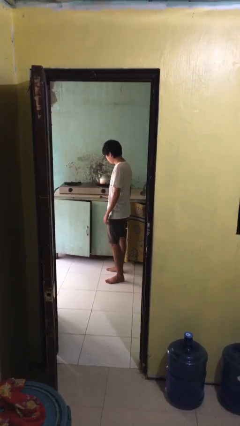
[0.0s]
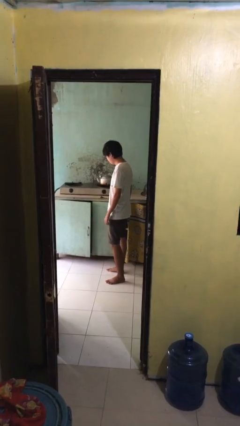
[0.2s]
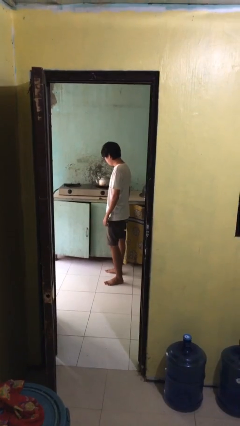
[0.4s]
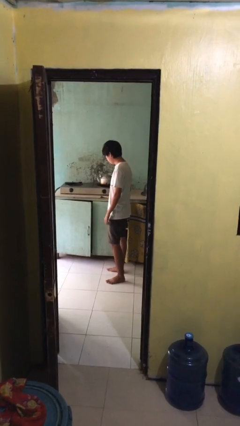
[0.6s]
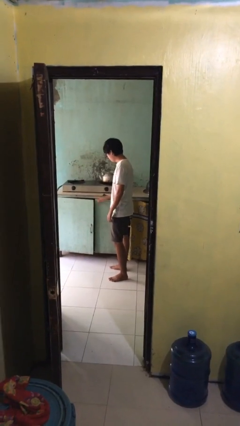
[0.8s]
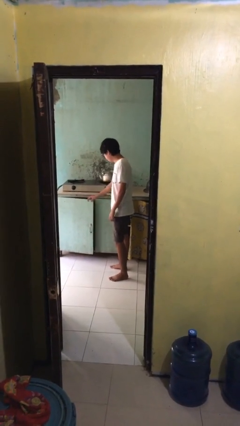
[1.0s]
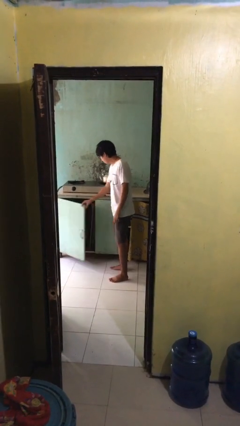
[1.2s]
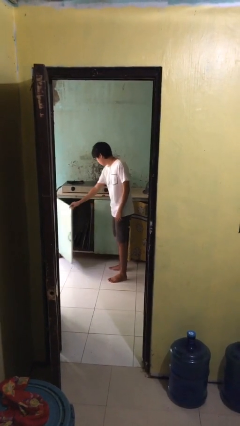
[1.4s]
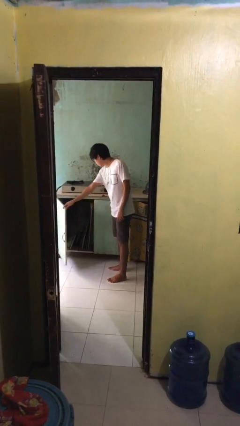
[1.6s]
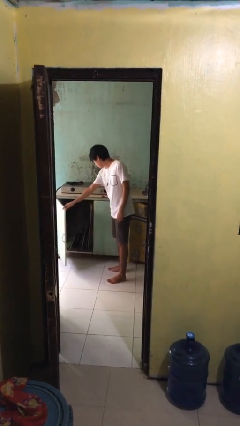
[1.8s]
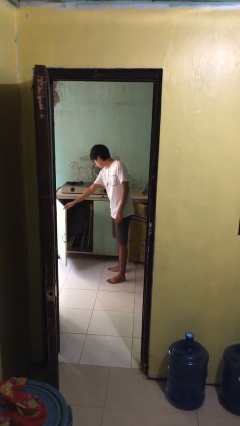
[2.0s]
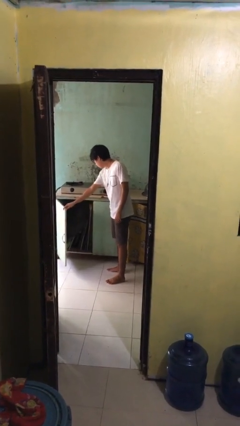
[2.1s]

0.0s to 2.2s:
person opens cabinet

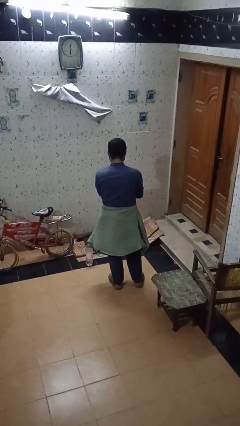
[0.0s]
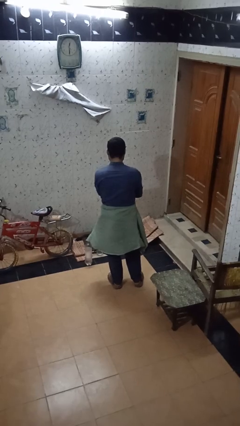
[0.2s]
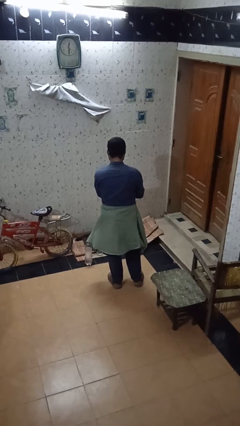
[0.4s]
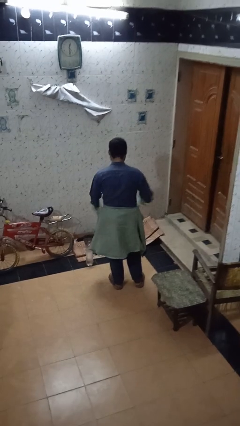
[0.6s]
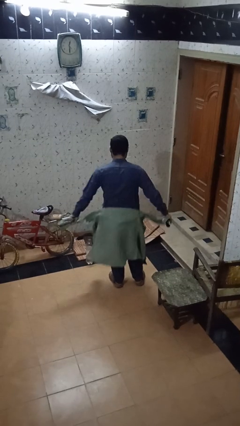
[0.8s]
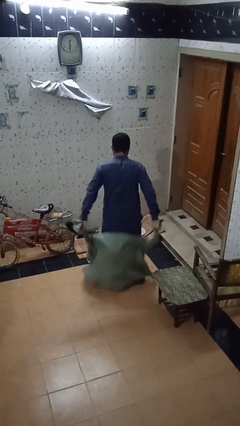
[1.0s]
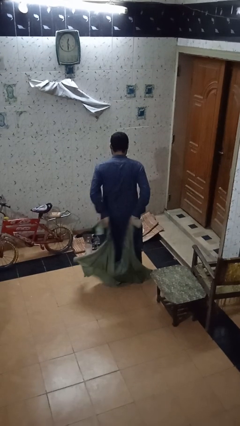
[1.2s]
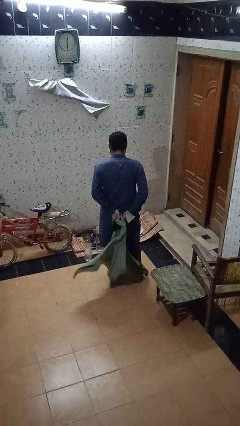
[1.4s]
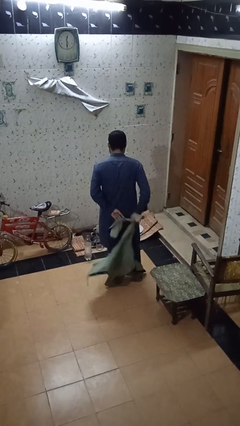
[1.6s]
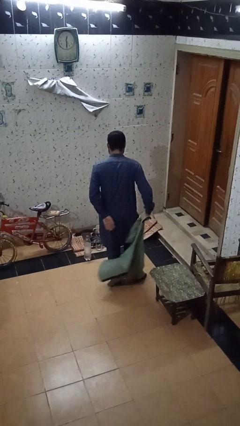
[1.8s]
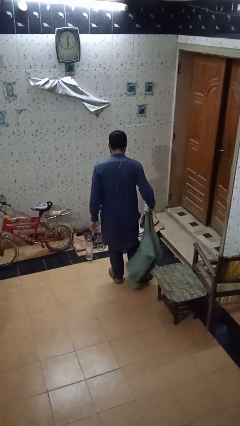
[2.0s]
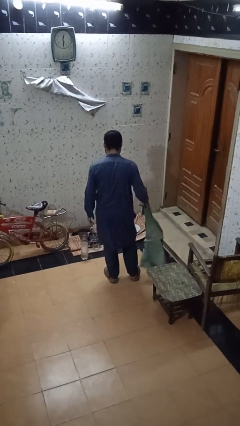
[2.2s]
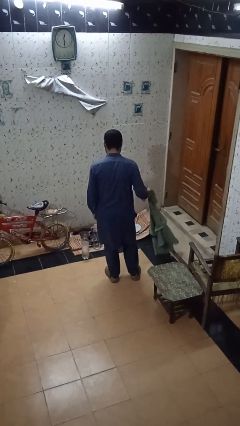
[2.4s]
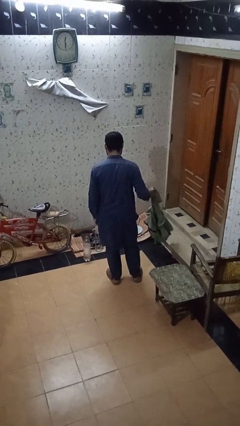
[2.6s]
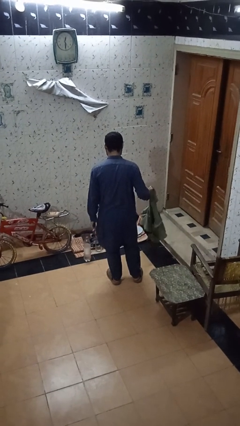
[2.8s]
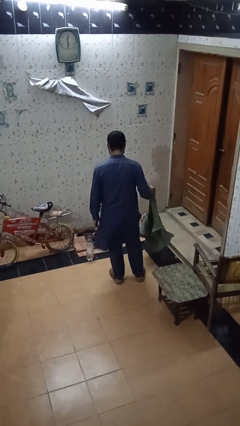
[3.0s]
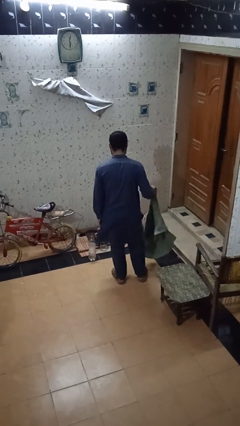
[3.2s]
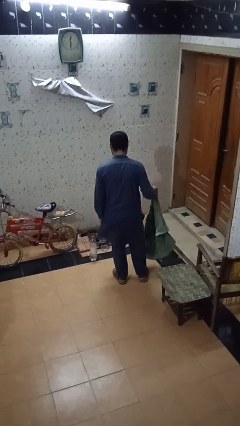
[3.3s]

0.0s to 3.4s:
person unties jacket around waist

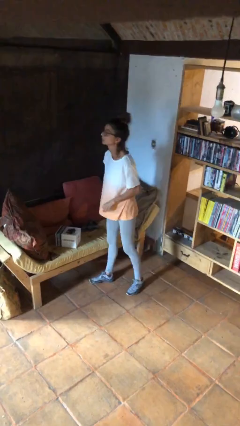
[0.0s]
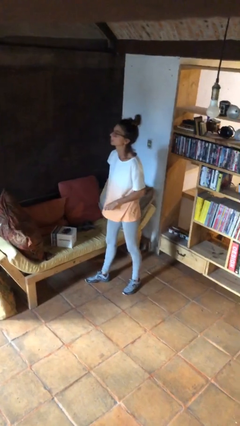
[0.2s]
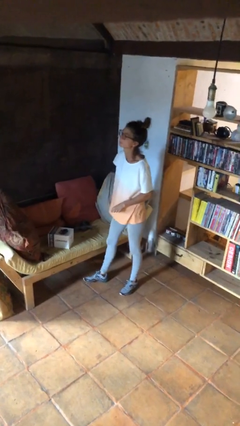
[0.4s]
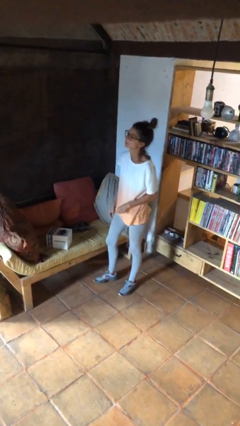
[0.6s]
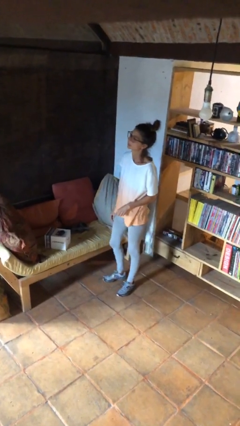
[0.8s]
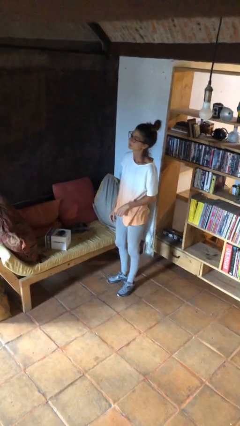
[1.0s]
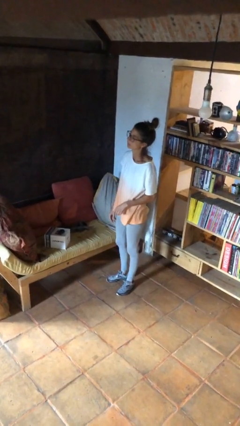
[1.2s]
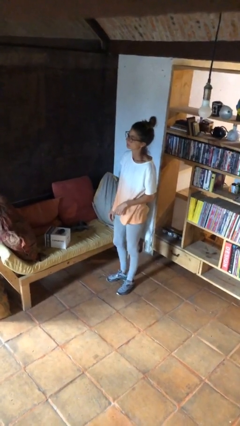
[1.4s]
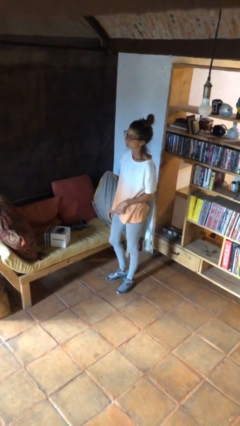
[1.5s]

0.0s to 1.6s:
person puts down object on couch

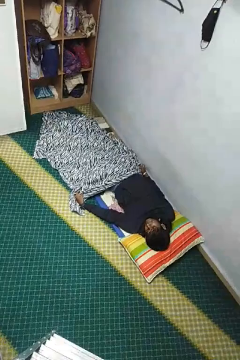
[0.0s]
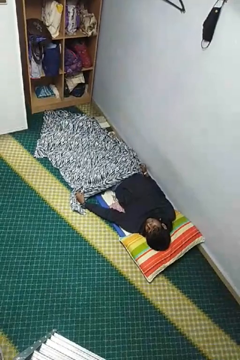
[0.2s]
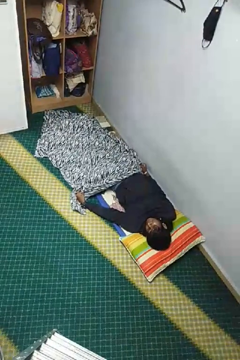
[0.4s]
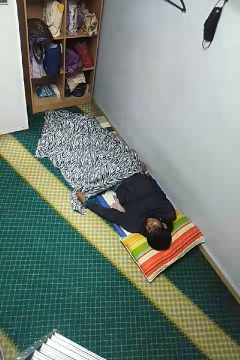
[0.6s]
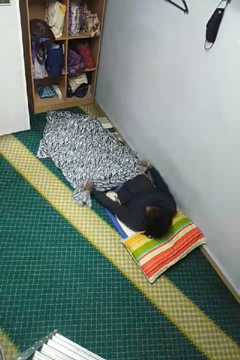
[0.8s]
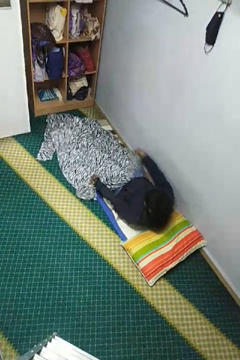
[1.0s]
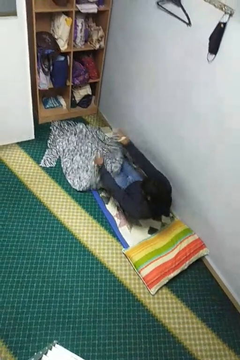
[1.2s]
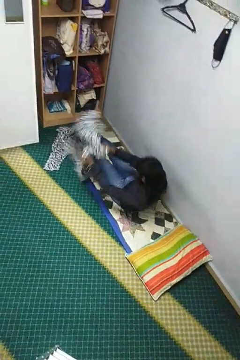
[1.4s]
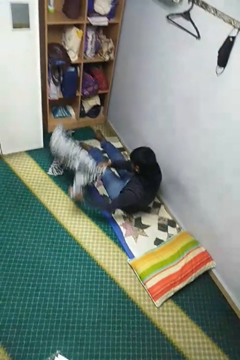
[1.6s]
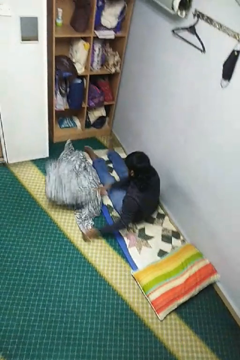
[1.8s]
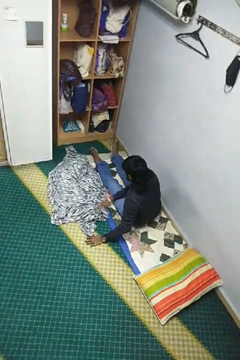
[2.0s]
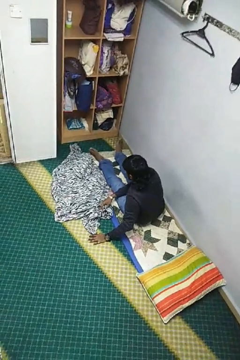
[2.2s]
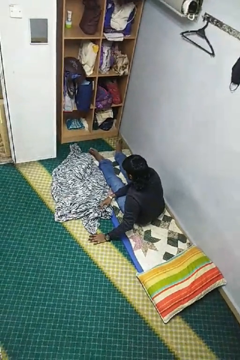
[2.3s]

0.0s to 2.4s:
person uncovers with blanket

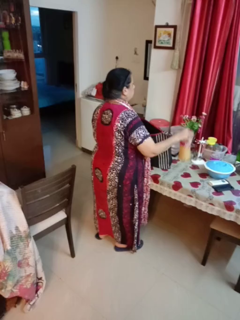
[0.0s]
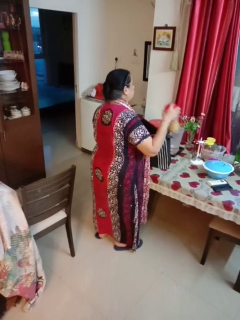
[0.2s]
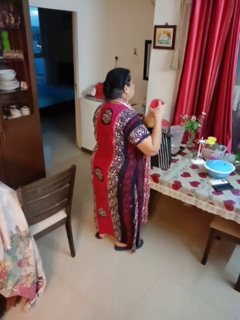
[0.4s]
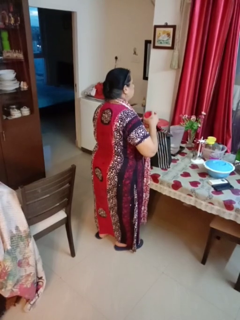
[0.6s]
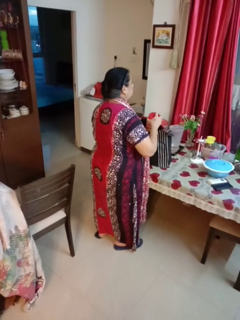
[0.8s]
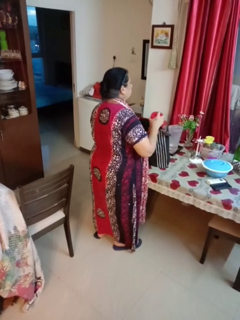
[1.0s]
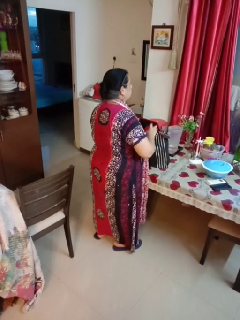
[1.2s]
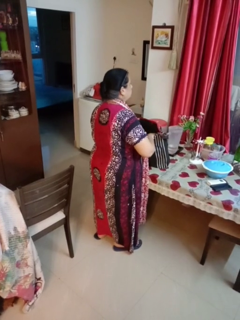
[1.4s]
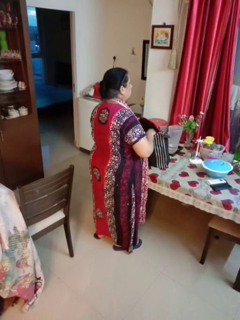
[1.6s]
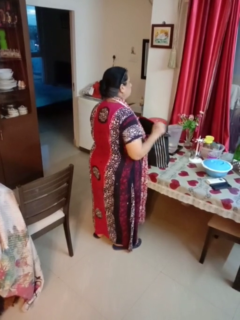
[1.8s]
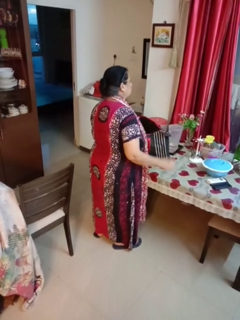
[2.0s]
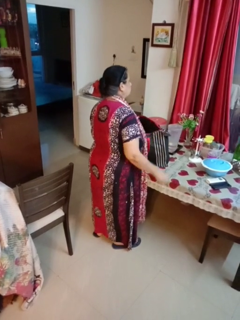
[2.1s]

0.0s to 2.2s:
person puts object into bag

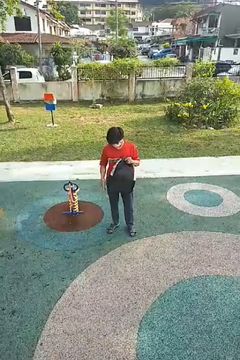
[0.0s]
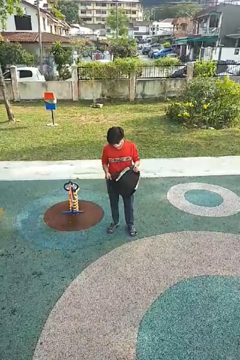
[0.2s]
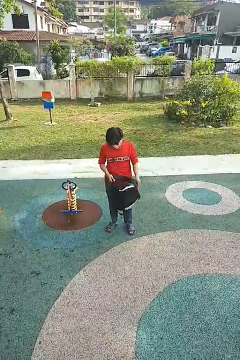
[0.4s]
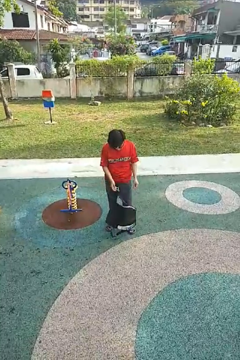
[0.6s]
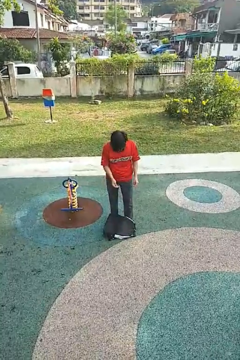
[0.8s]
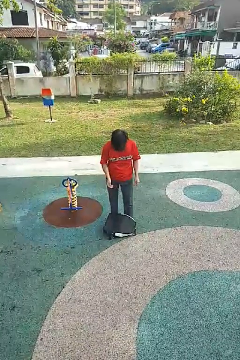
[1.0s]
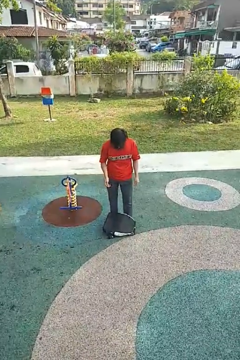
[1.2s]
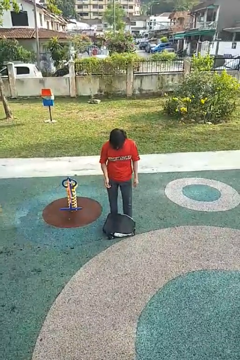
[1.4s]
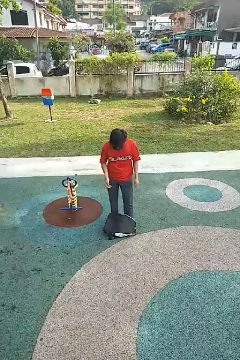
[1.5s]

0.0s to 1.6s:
person drops object

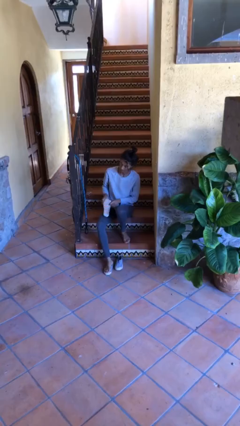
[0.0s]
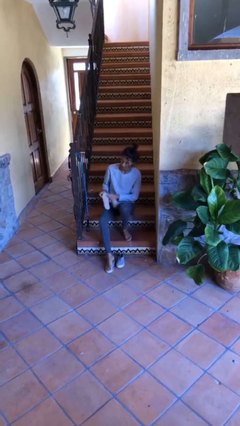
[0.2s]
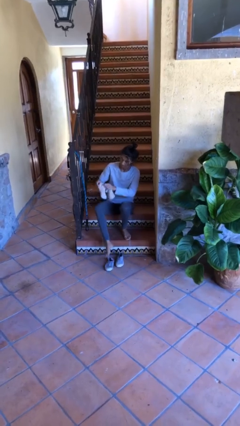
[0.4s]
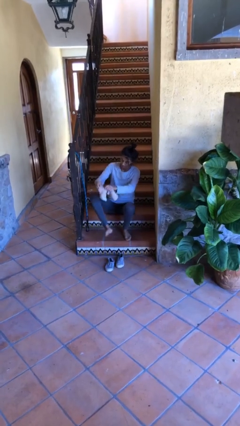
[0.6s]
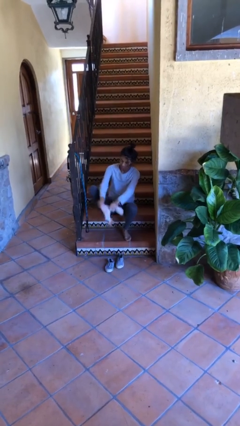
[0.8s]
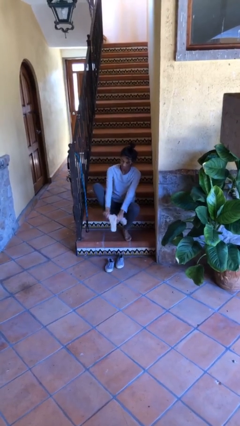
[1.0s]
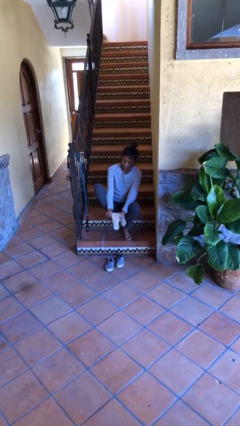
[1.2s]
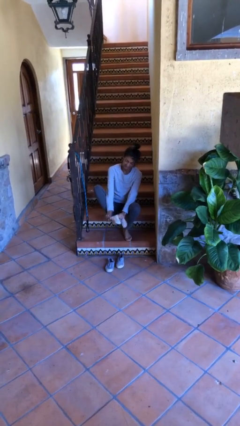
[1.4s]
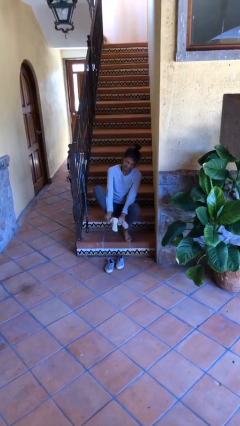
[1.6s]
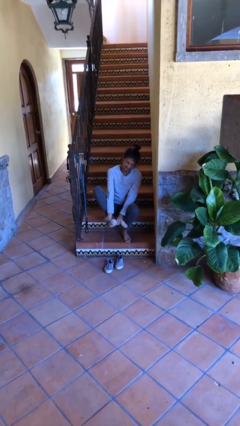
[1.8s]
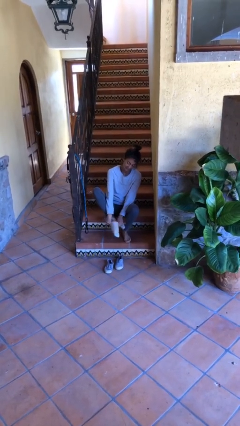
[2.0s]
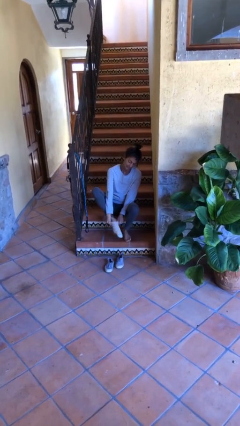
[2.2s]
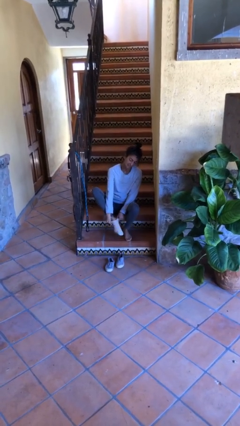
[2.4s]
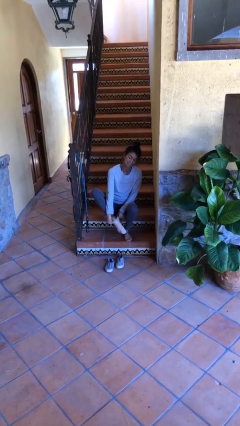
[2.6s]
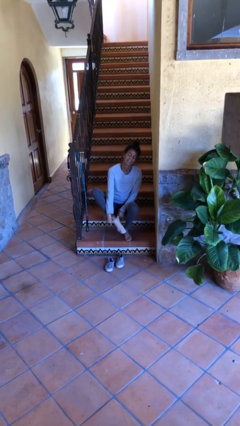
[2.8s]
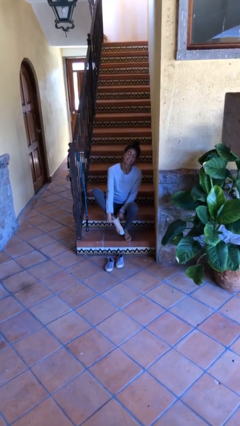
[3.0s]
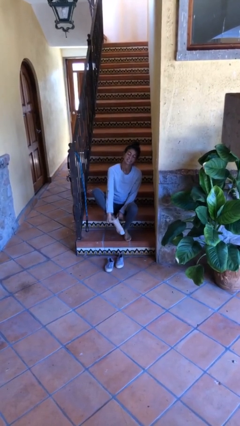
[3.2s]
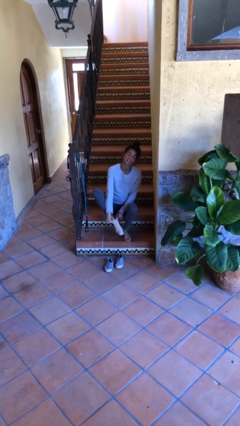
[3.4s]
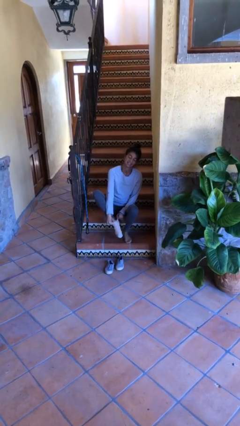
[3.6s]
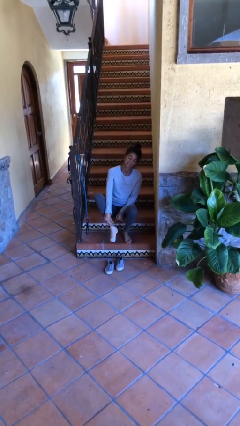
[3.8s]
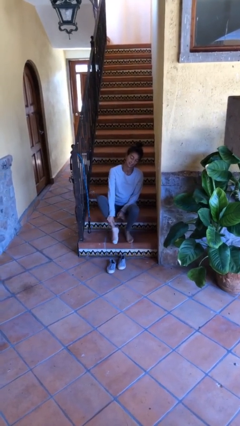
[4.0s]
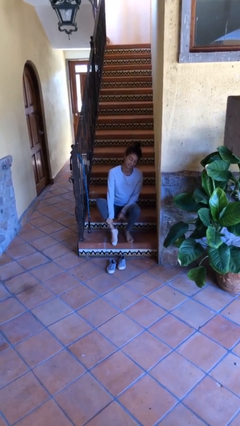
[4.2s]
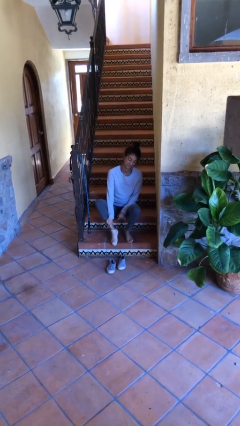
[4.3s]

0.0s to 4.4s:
person puts on socks

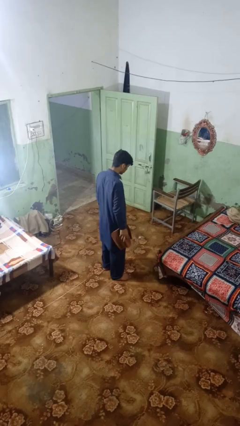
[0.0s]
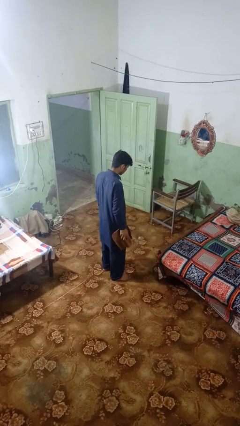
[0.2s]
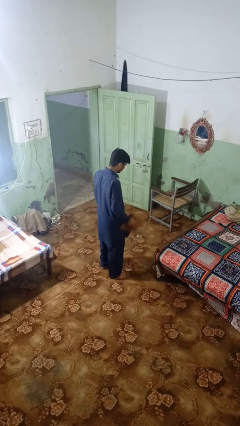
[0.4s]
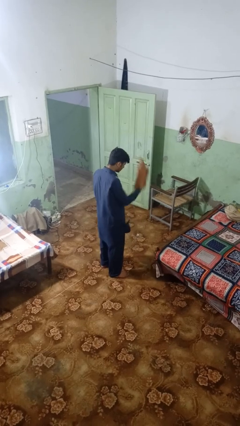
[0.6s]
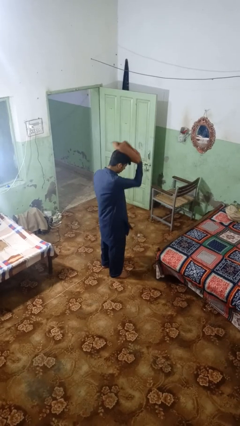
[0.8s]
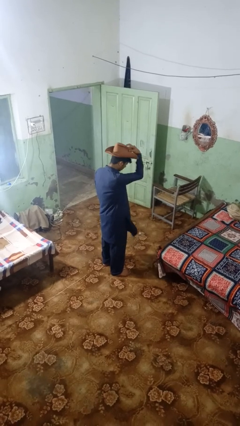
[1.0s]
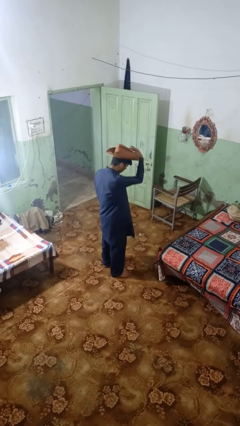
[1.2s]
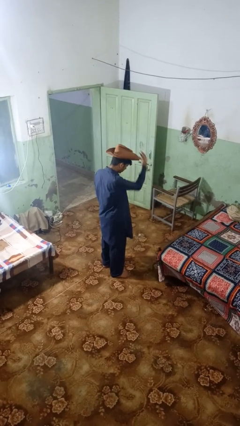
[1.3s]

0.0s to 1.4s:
person puts on hat
